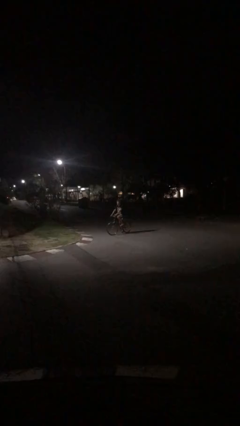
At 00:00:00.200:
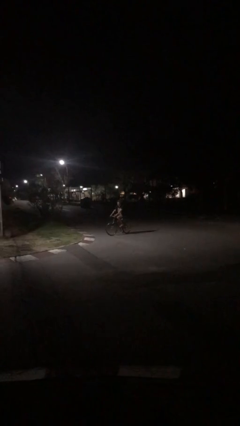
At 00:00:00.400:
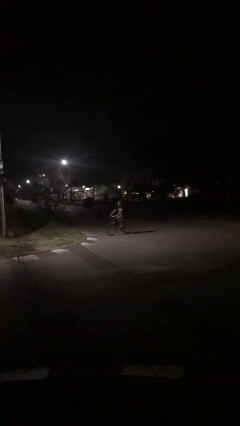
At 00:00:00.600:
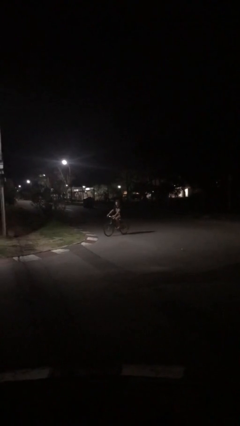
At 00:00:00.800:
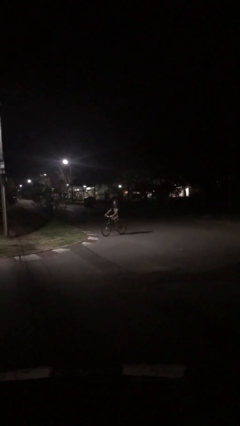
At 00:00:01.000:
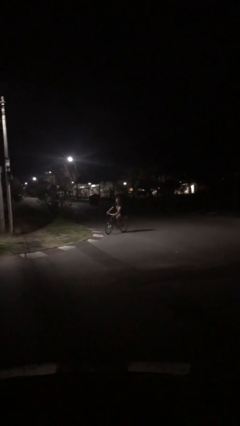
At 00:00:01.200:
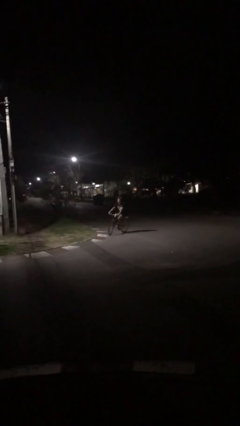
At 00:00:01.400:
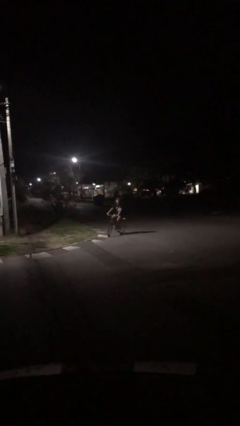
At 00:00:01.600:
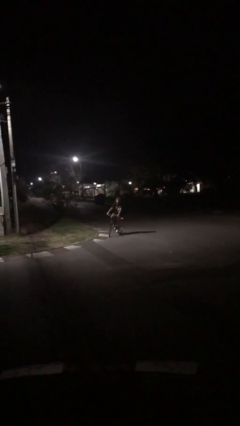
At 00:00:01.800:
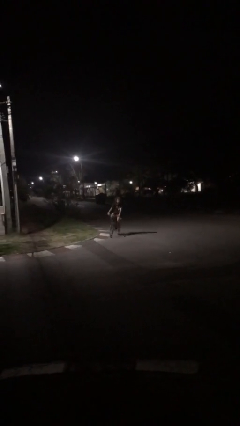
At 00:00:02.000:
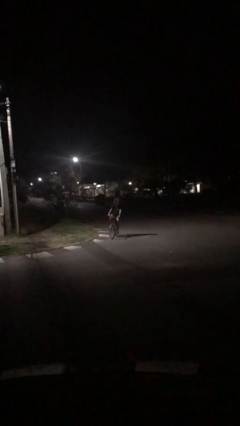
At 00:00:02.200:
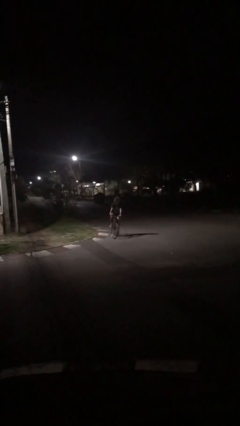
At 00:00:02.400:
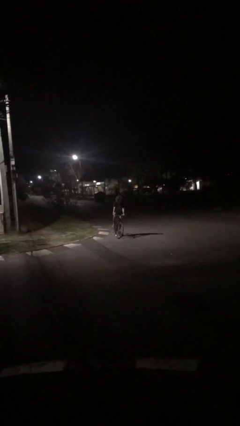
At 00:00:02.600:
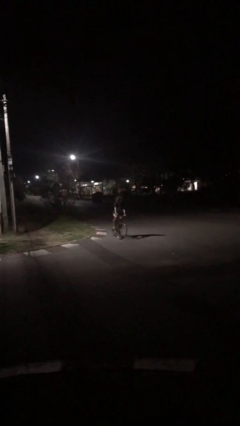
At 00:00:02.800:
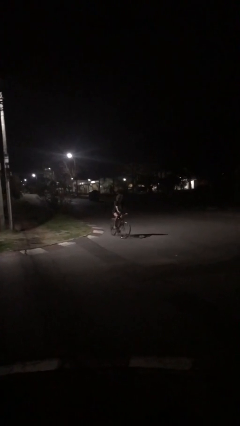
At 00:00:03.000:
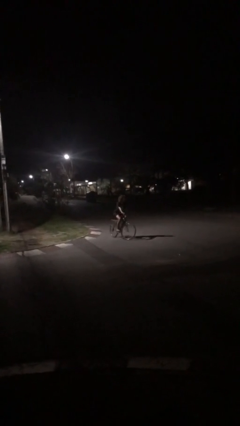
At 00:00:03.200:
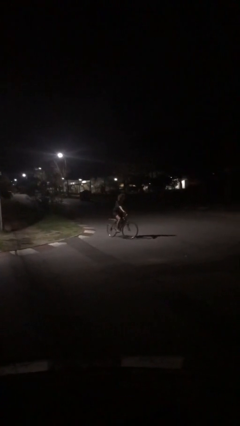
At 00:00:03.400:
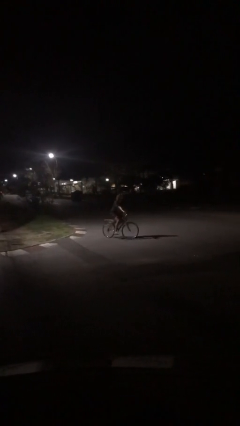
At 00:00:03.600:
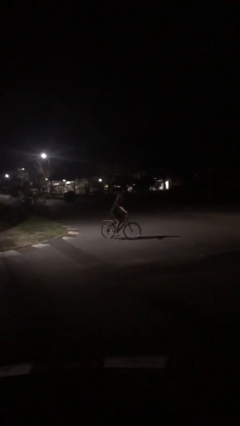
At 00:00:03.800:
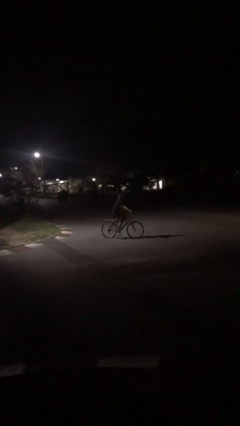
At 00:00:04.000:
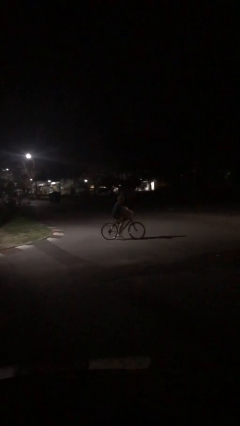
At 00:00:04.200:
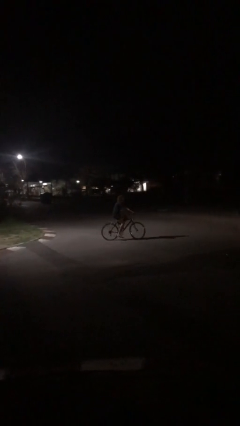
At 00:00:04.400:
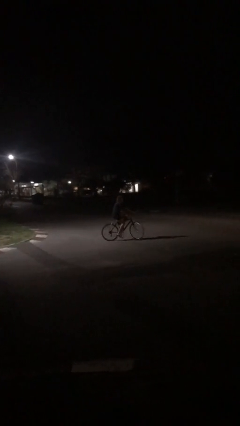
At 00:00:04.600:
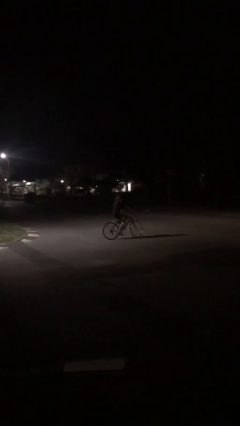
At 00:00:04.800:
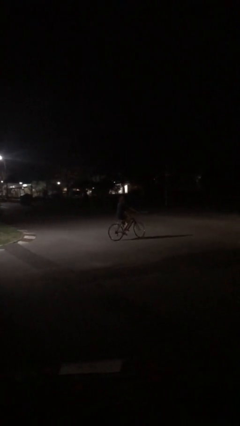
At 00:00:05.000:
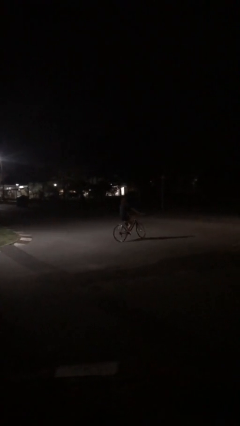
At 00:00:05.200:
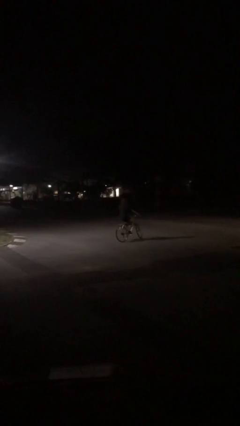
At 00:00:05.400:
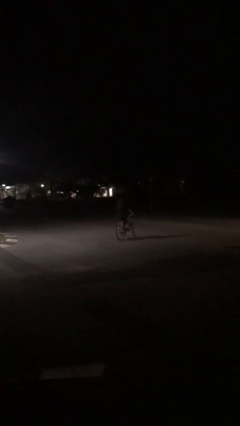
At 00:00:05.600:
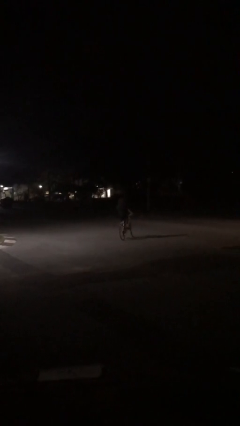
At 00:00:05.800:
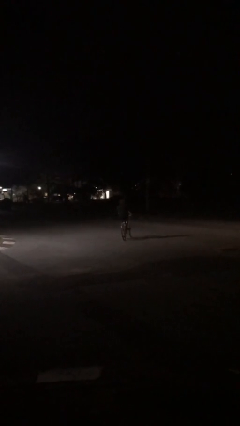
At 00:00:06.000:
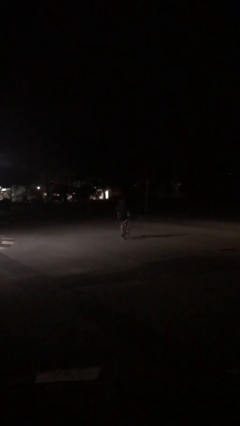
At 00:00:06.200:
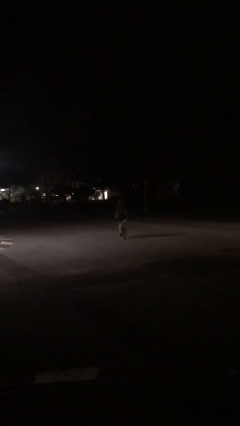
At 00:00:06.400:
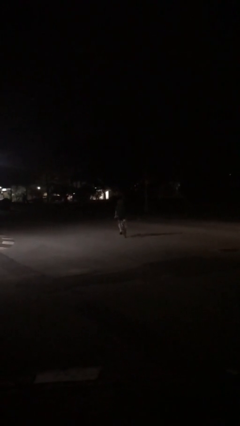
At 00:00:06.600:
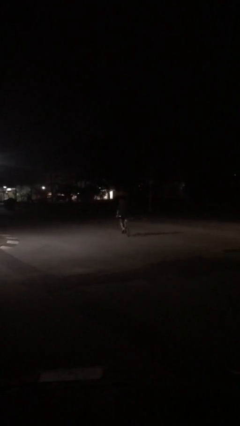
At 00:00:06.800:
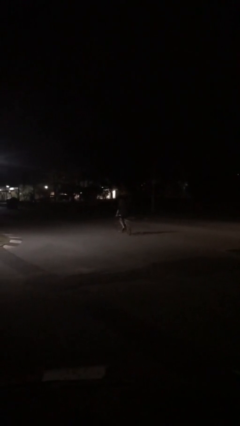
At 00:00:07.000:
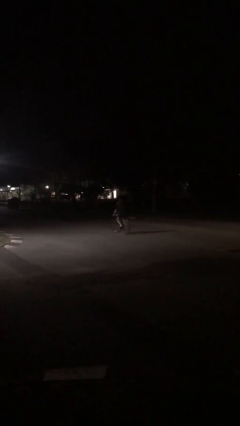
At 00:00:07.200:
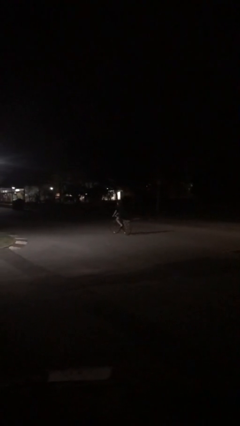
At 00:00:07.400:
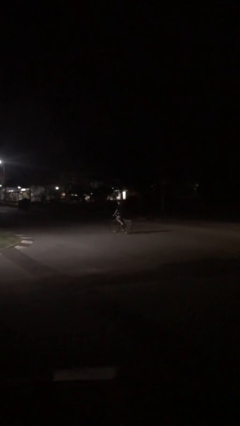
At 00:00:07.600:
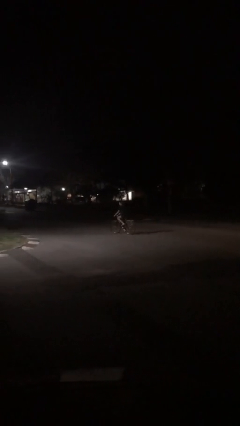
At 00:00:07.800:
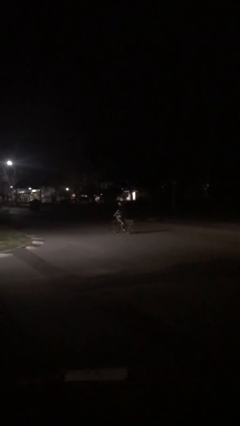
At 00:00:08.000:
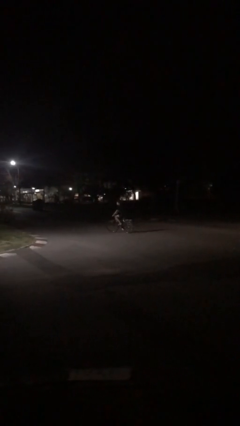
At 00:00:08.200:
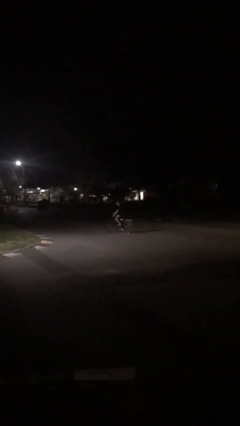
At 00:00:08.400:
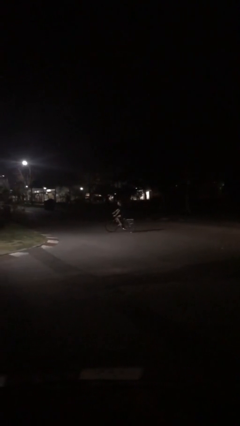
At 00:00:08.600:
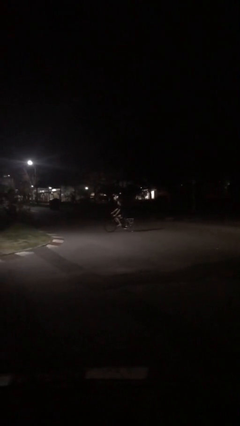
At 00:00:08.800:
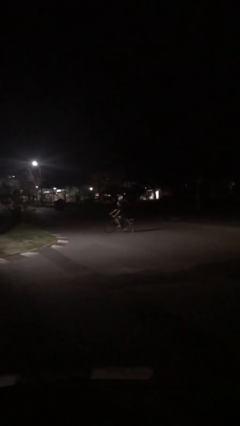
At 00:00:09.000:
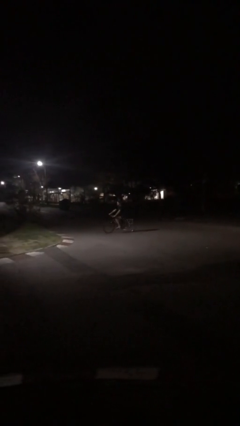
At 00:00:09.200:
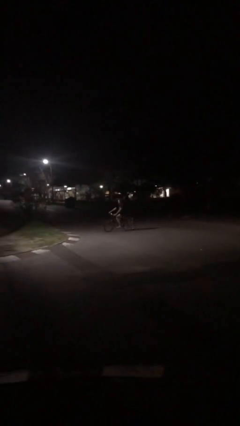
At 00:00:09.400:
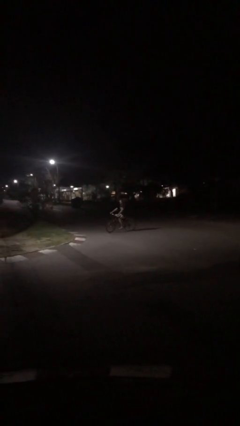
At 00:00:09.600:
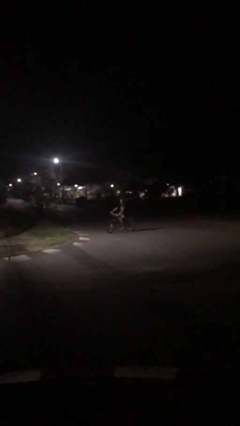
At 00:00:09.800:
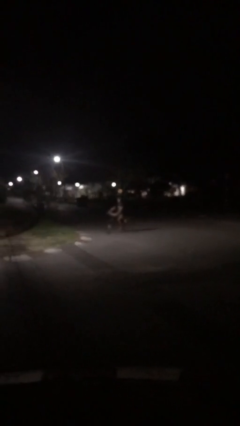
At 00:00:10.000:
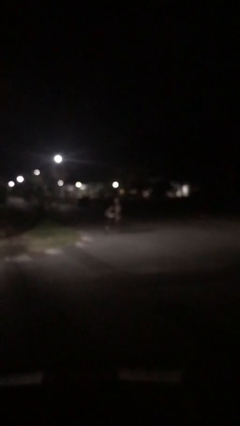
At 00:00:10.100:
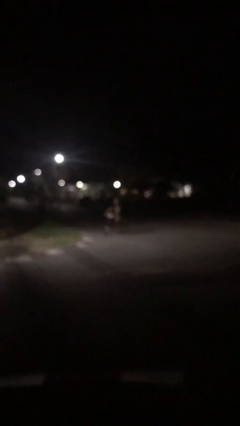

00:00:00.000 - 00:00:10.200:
person rides bicycle

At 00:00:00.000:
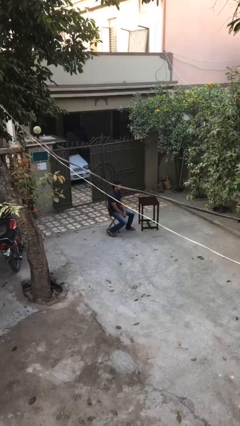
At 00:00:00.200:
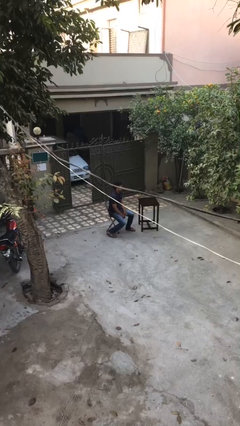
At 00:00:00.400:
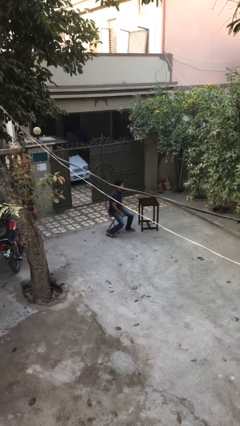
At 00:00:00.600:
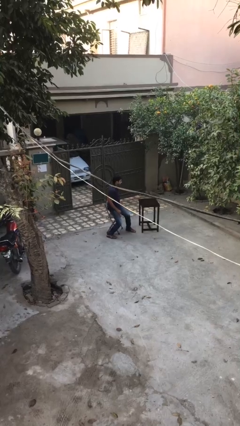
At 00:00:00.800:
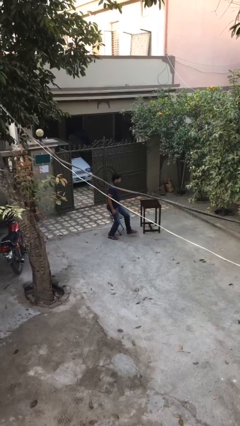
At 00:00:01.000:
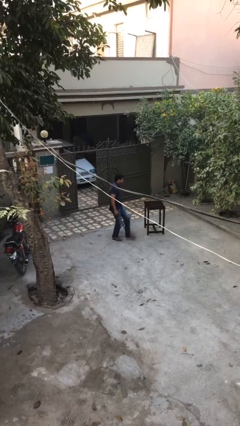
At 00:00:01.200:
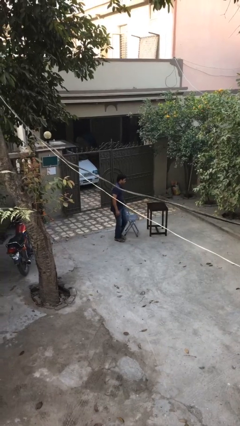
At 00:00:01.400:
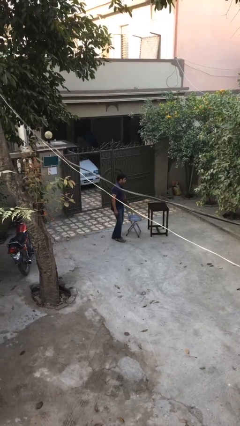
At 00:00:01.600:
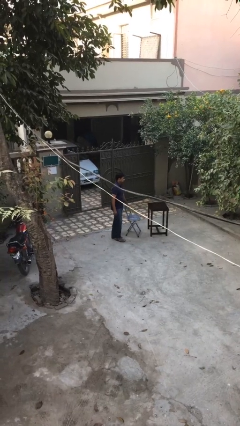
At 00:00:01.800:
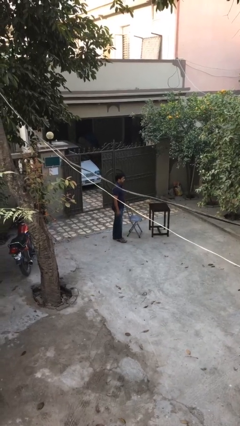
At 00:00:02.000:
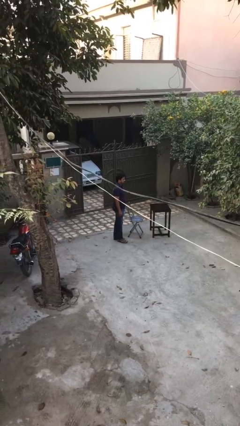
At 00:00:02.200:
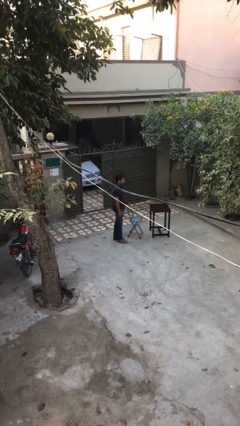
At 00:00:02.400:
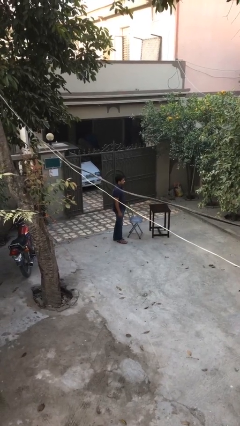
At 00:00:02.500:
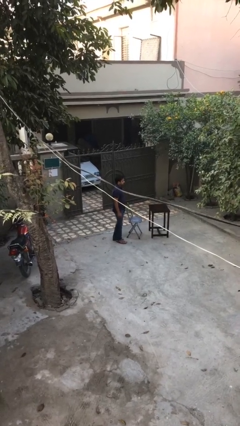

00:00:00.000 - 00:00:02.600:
person stands up

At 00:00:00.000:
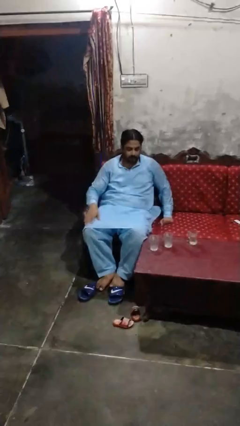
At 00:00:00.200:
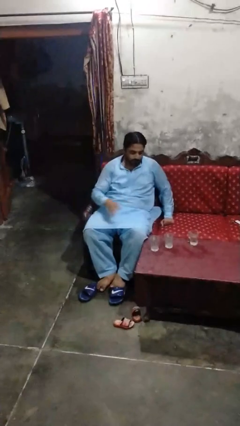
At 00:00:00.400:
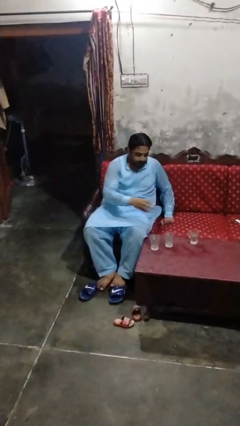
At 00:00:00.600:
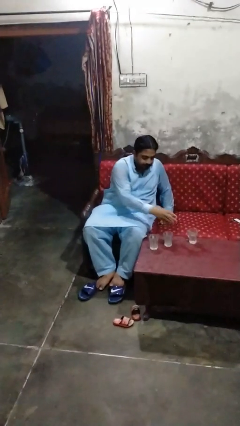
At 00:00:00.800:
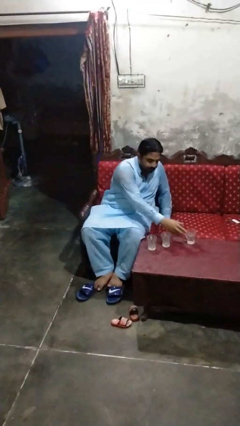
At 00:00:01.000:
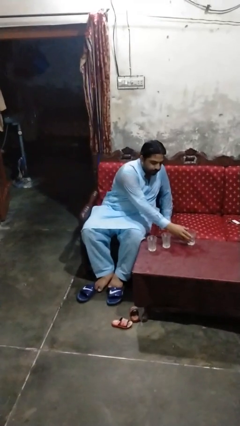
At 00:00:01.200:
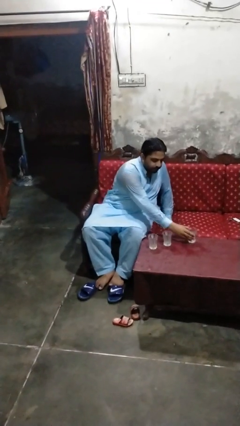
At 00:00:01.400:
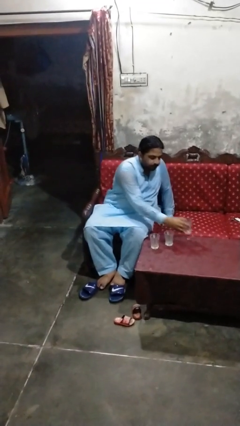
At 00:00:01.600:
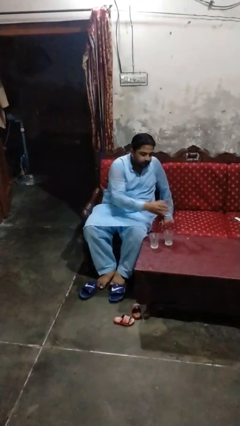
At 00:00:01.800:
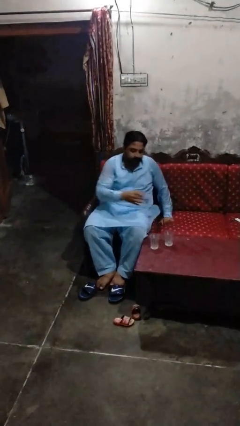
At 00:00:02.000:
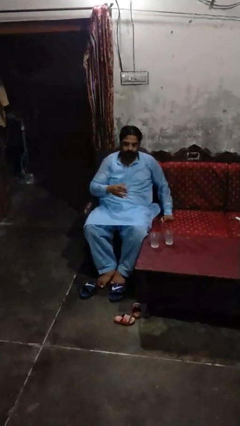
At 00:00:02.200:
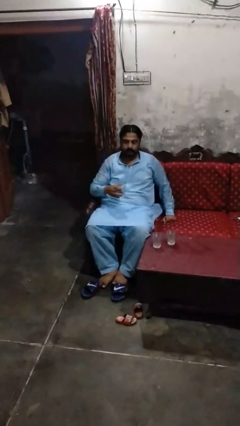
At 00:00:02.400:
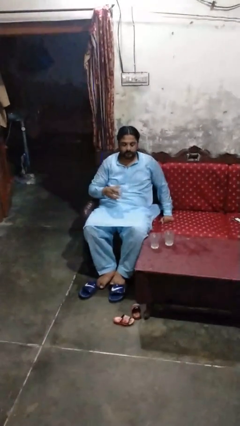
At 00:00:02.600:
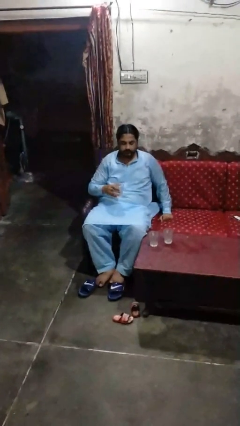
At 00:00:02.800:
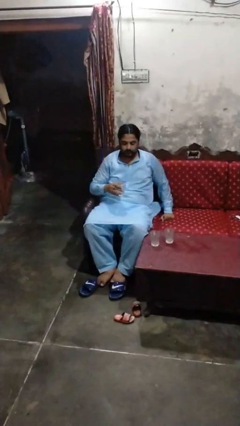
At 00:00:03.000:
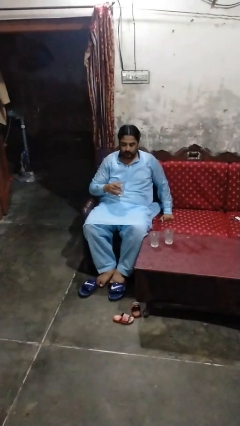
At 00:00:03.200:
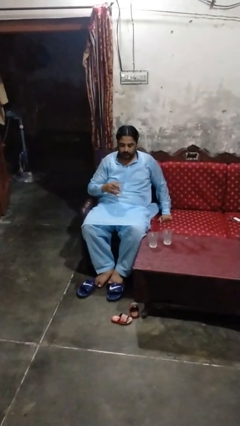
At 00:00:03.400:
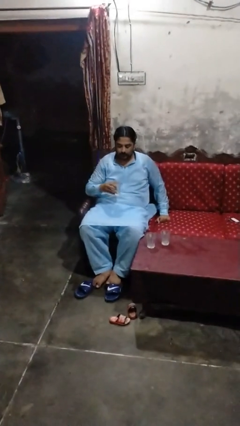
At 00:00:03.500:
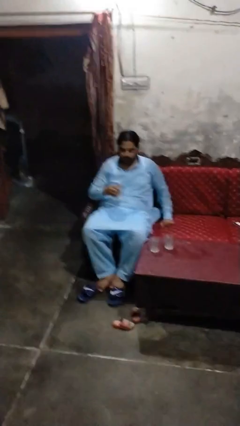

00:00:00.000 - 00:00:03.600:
person picks up object from table

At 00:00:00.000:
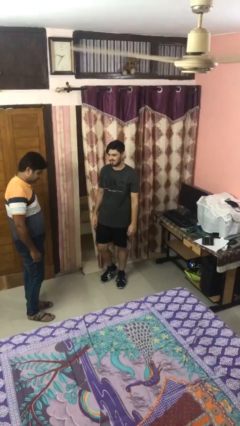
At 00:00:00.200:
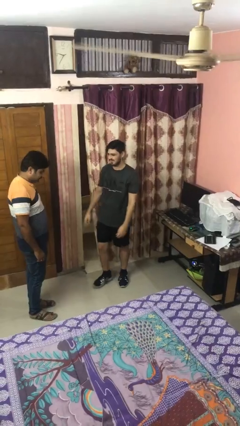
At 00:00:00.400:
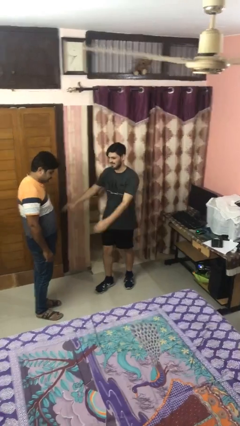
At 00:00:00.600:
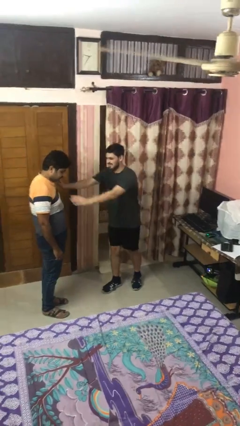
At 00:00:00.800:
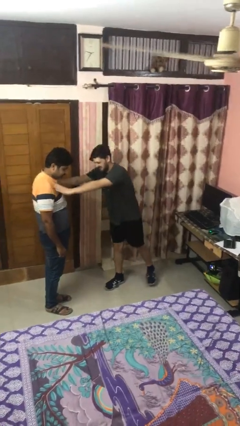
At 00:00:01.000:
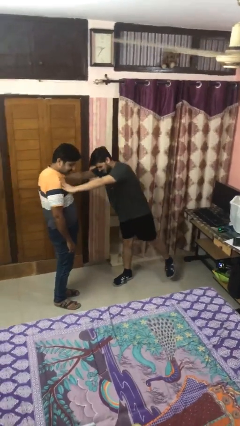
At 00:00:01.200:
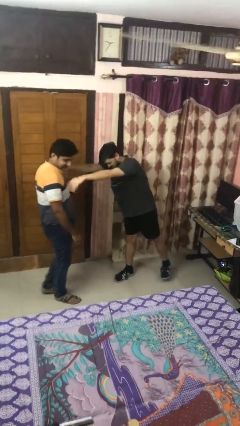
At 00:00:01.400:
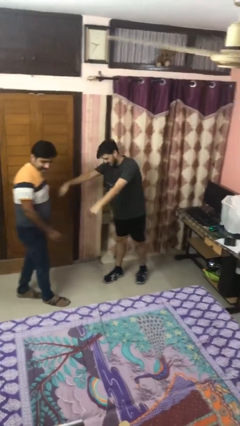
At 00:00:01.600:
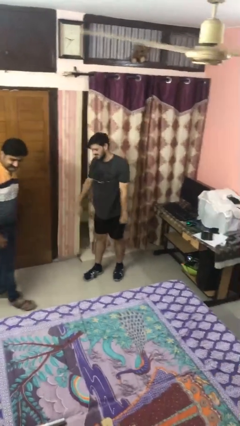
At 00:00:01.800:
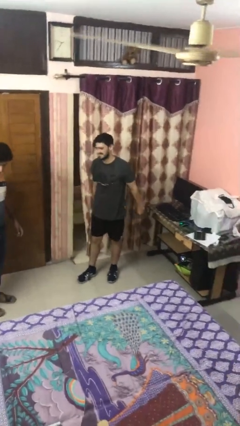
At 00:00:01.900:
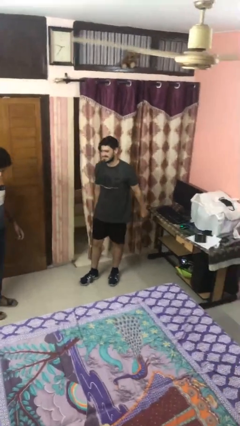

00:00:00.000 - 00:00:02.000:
person shoves person
